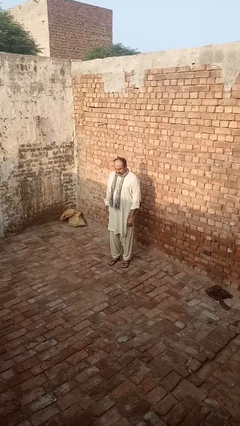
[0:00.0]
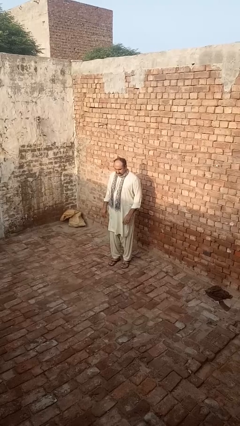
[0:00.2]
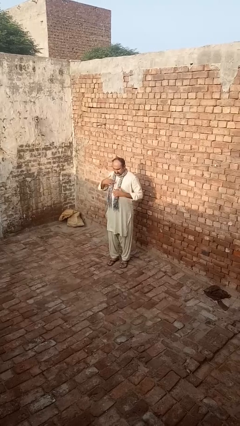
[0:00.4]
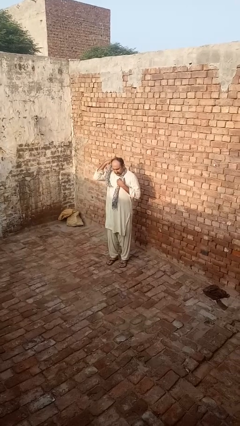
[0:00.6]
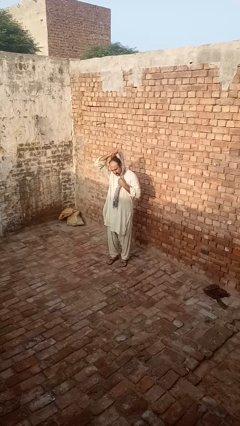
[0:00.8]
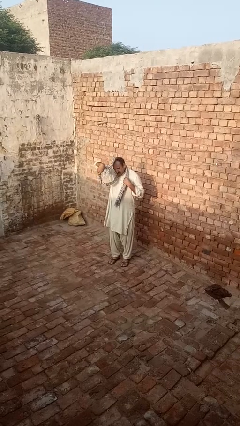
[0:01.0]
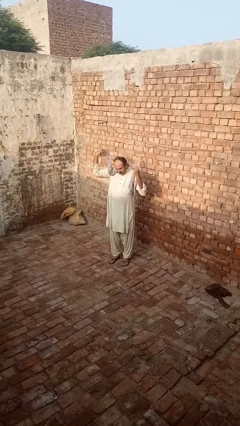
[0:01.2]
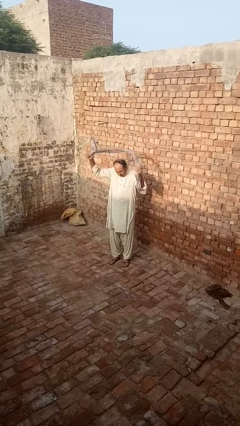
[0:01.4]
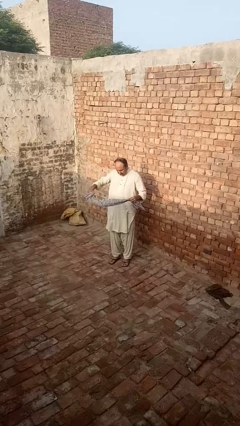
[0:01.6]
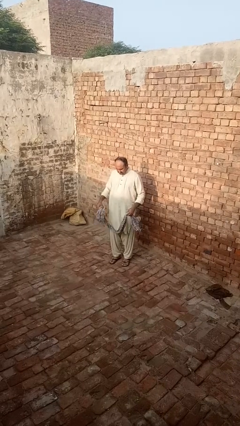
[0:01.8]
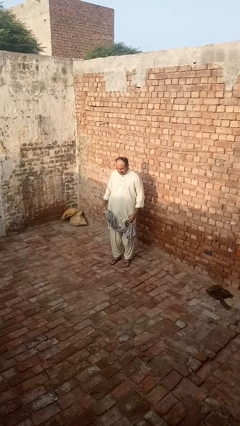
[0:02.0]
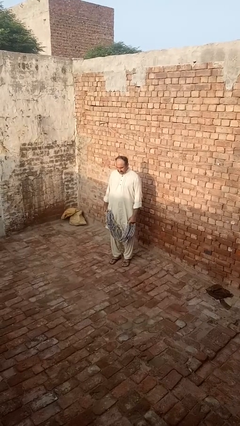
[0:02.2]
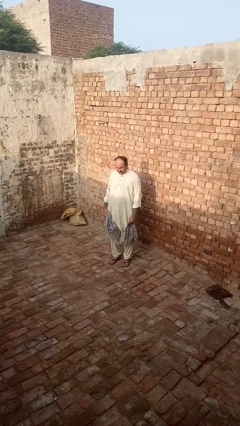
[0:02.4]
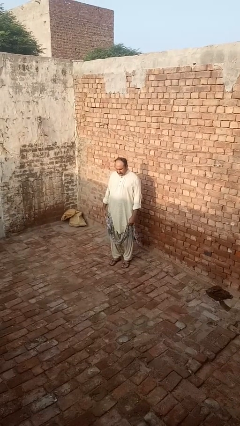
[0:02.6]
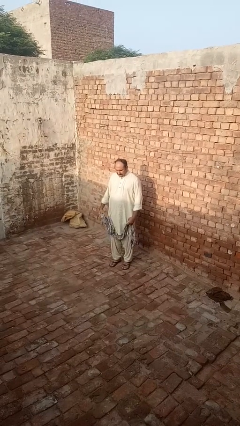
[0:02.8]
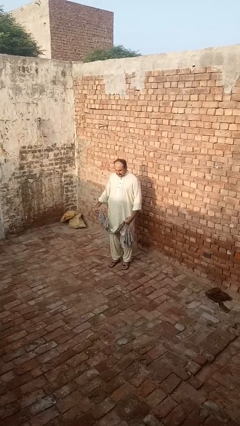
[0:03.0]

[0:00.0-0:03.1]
person takes off scarf

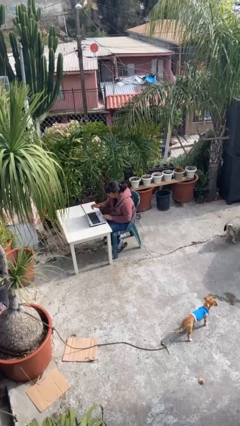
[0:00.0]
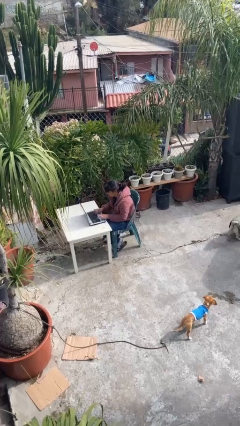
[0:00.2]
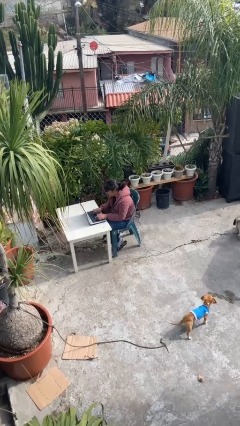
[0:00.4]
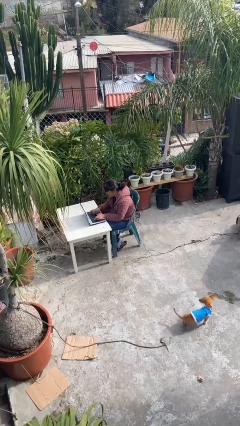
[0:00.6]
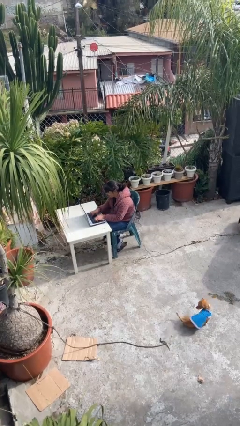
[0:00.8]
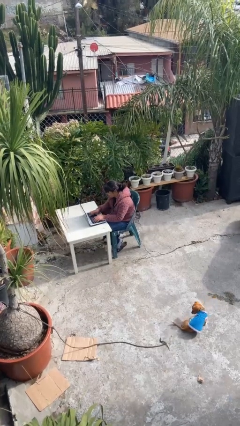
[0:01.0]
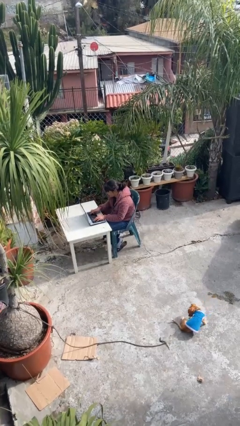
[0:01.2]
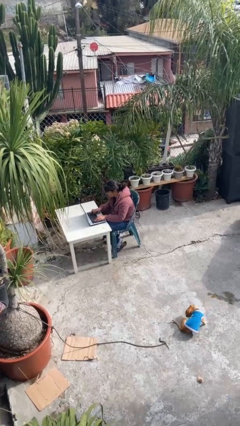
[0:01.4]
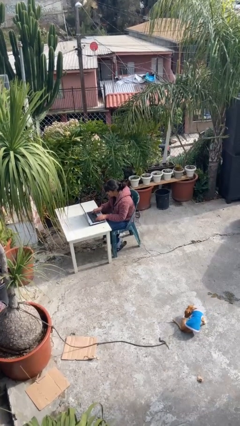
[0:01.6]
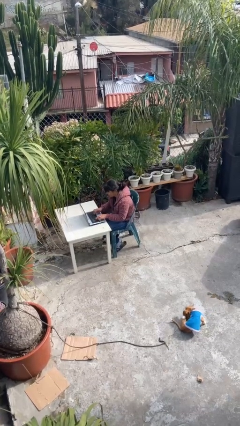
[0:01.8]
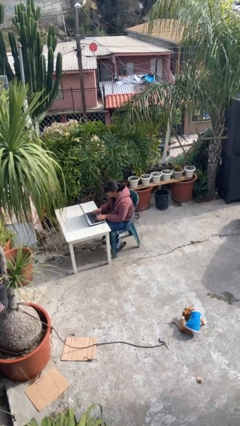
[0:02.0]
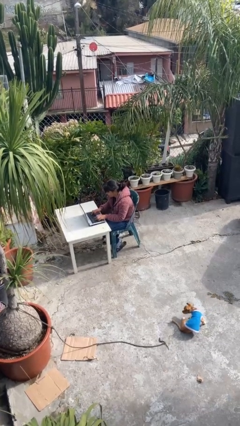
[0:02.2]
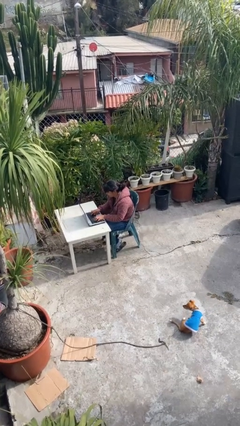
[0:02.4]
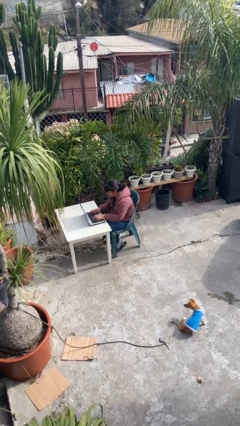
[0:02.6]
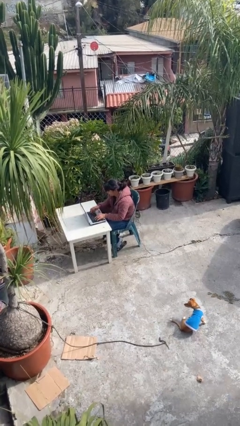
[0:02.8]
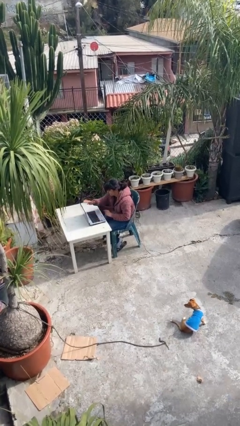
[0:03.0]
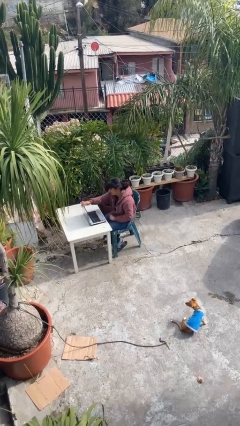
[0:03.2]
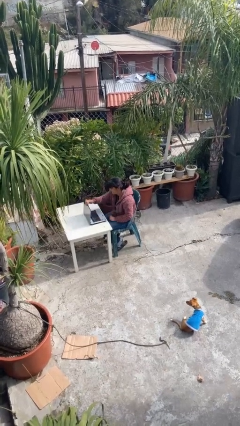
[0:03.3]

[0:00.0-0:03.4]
person interacts with laptop

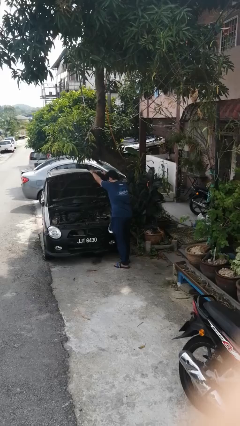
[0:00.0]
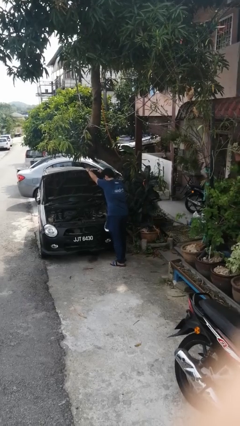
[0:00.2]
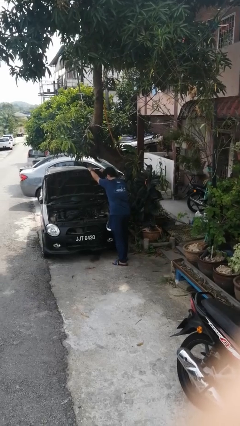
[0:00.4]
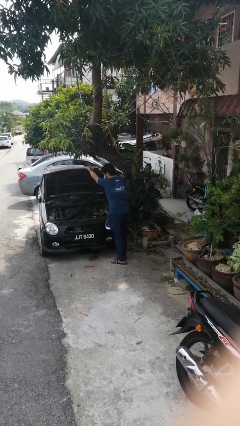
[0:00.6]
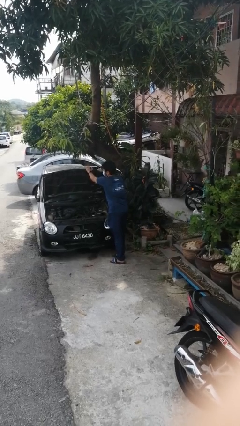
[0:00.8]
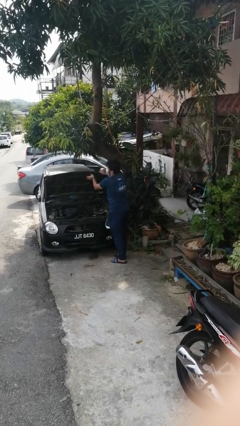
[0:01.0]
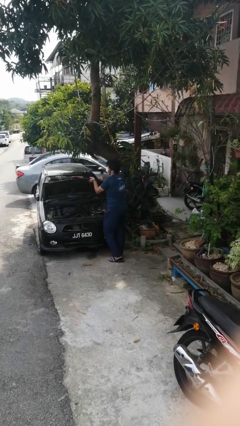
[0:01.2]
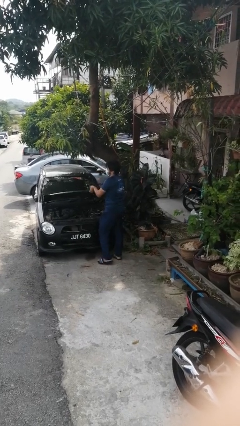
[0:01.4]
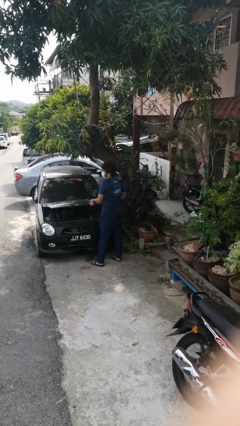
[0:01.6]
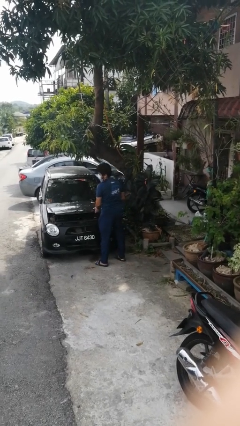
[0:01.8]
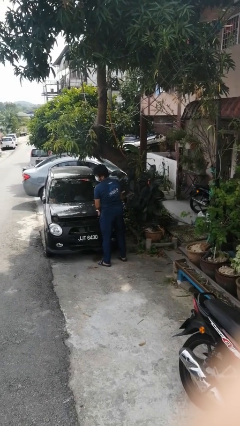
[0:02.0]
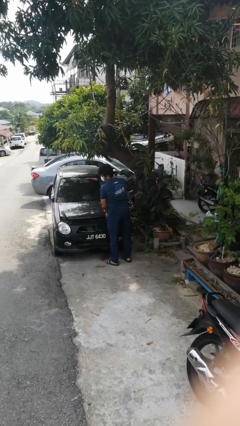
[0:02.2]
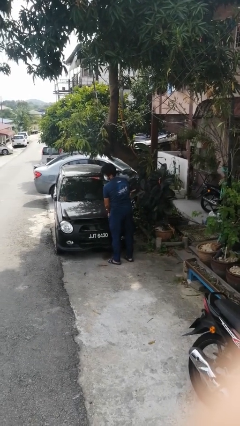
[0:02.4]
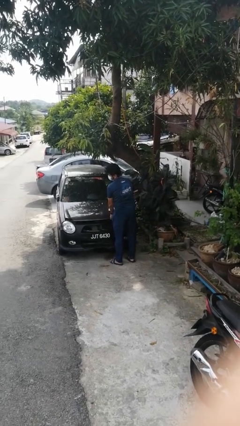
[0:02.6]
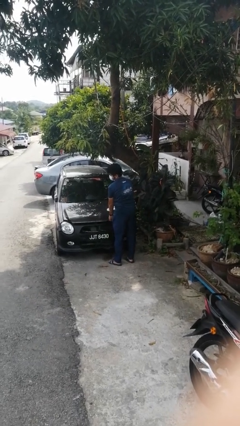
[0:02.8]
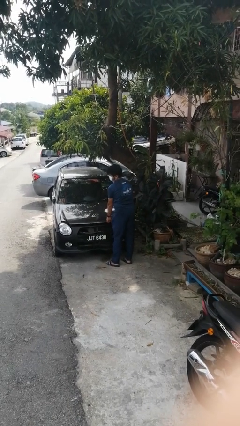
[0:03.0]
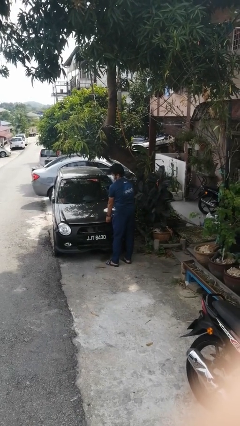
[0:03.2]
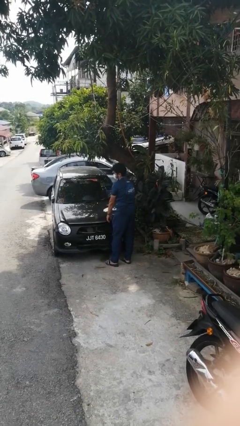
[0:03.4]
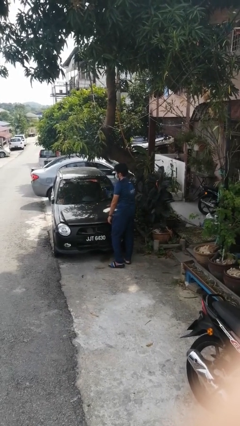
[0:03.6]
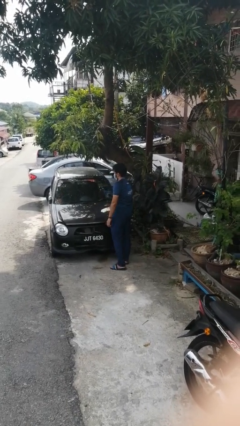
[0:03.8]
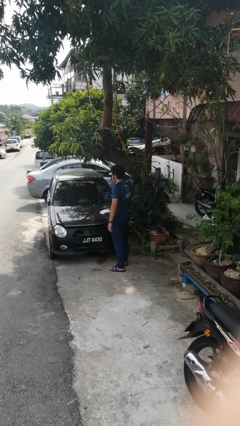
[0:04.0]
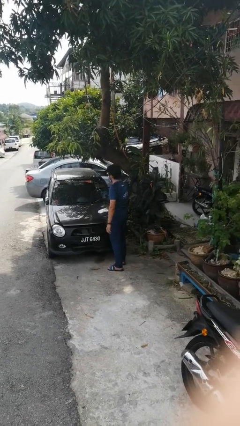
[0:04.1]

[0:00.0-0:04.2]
person closes car hood

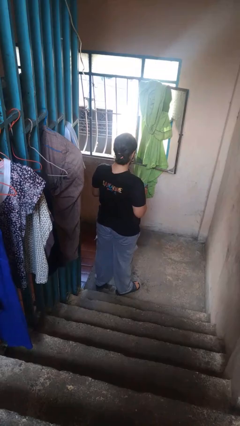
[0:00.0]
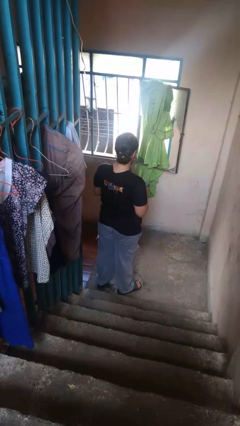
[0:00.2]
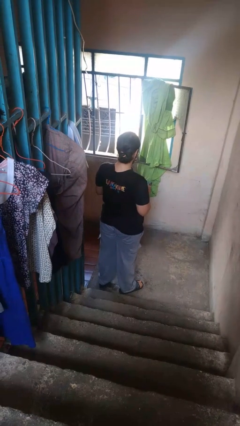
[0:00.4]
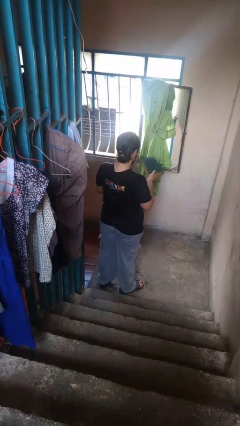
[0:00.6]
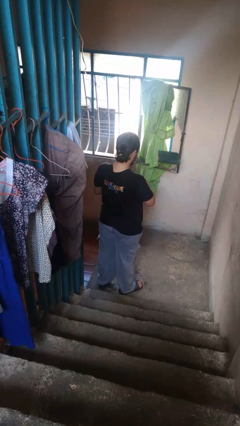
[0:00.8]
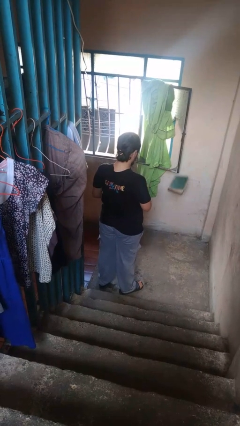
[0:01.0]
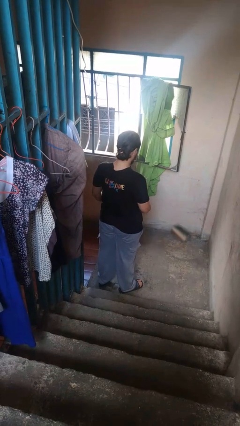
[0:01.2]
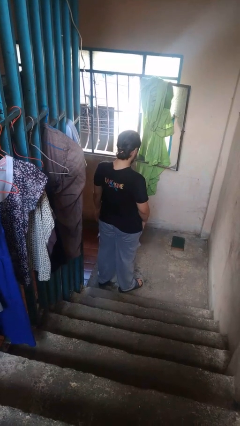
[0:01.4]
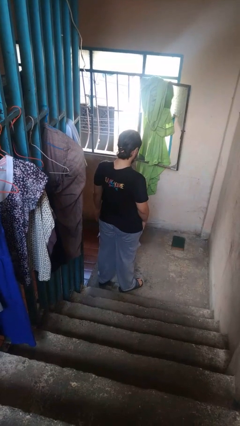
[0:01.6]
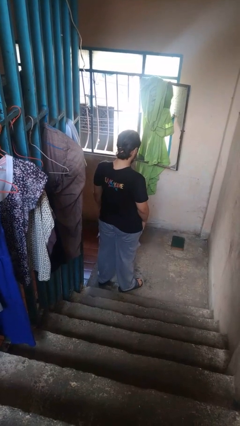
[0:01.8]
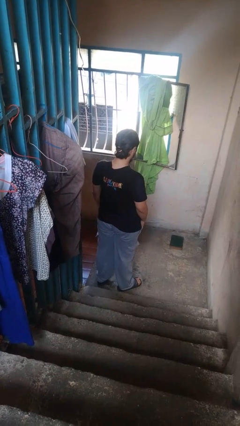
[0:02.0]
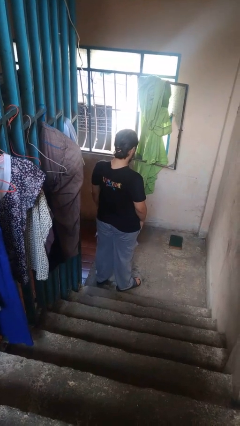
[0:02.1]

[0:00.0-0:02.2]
person throws object into air

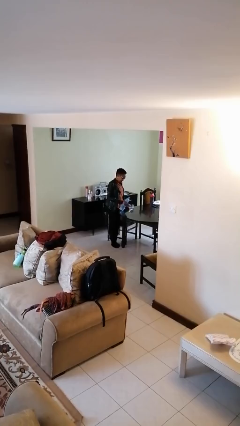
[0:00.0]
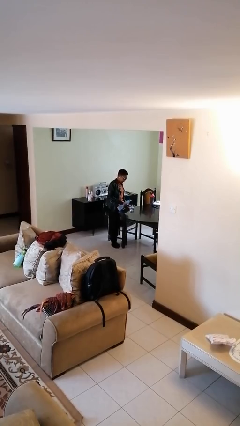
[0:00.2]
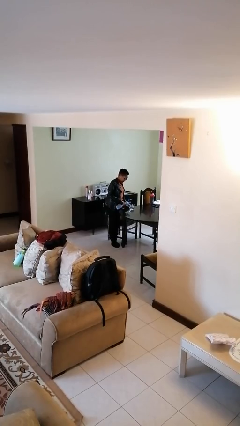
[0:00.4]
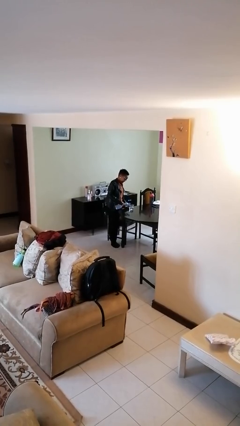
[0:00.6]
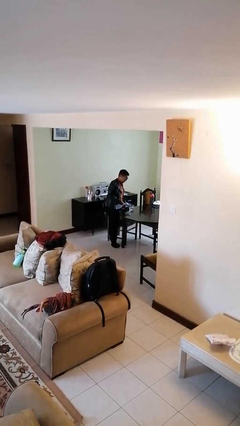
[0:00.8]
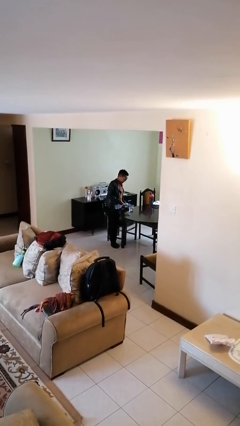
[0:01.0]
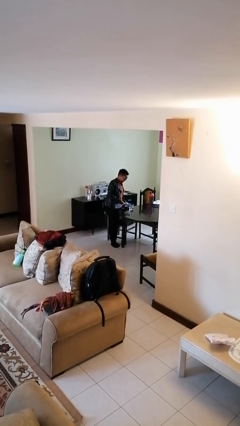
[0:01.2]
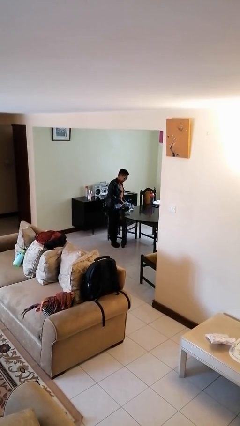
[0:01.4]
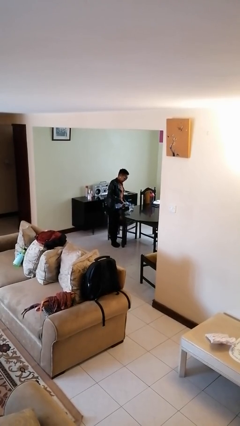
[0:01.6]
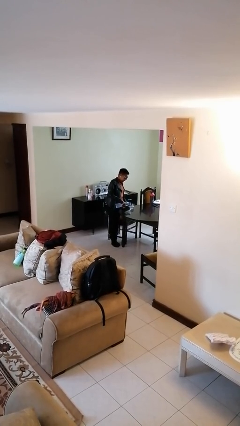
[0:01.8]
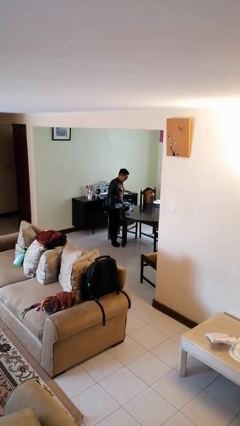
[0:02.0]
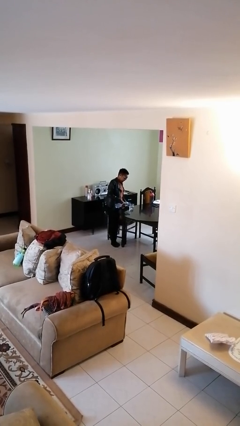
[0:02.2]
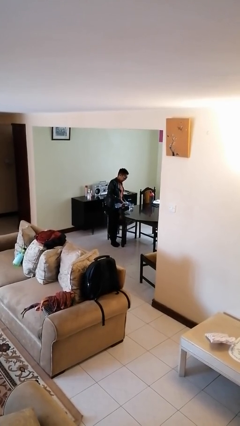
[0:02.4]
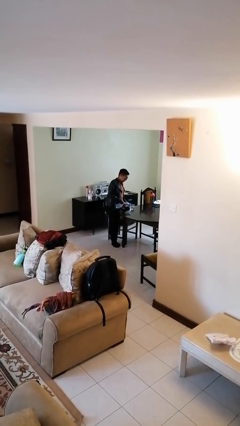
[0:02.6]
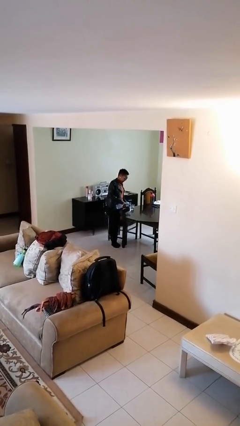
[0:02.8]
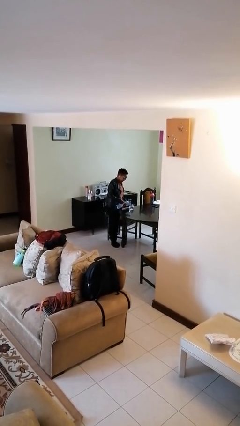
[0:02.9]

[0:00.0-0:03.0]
person pours liquid into cup

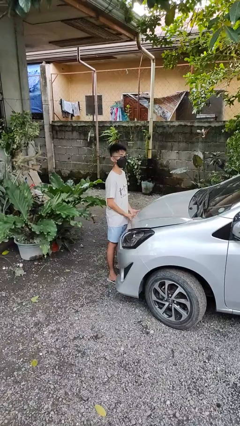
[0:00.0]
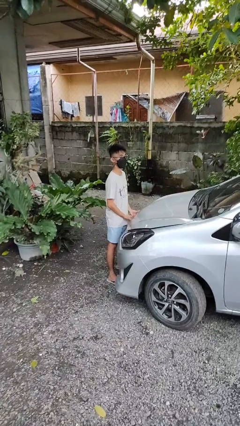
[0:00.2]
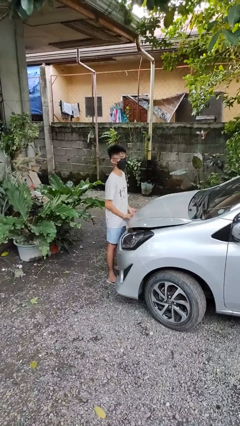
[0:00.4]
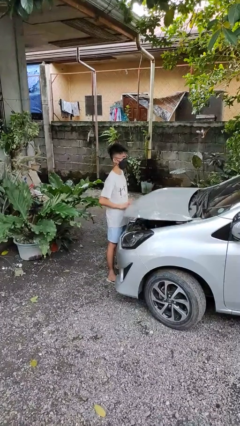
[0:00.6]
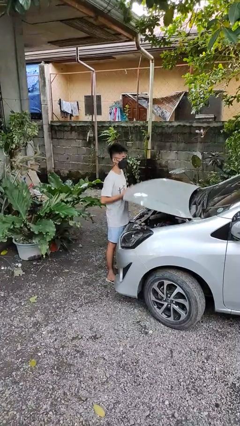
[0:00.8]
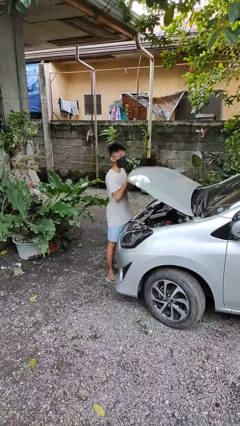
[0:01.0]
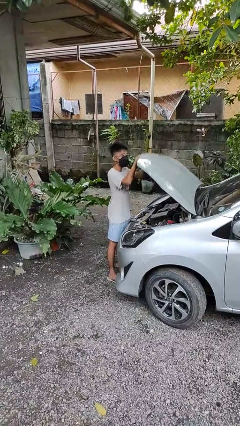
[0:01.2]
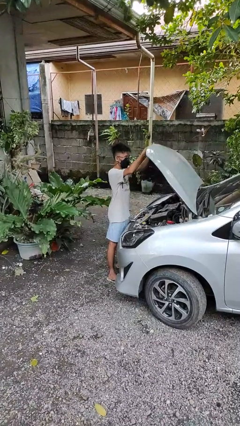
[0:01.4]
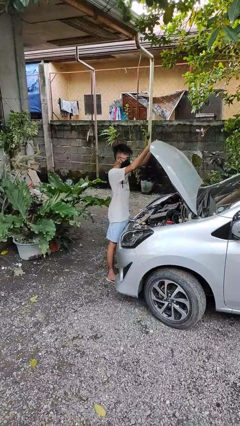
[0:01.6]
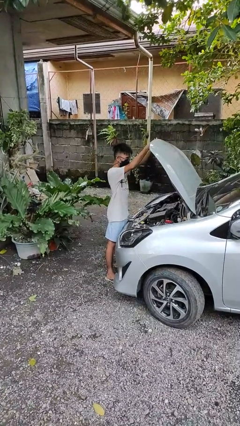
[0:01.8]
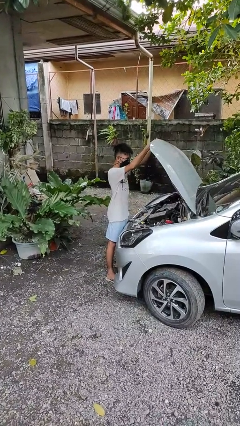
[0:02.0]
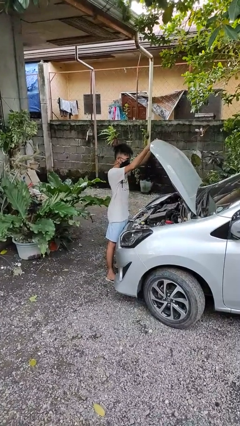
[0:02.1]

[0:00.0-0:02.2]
person opens car hood
